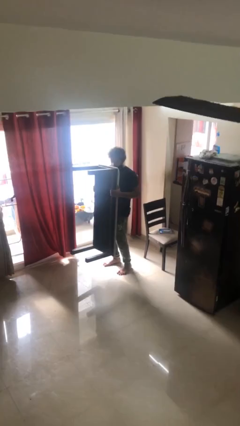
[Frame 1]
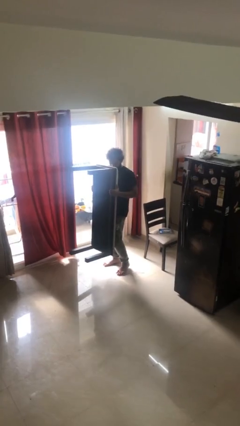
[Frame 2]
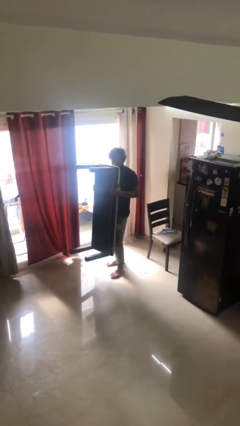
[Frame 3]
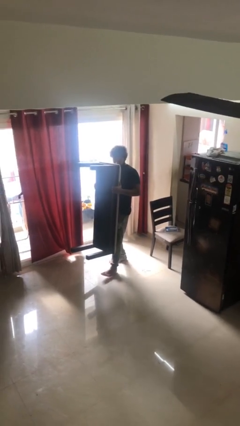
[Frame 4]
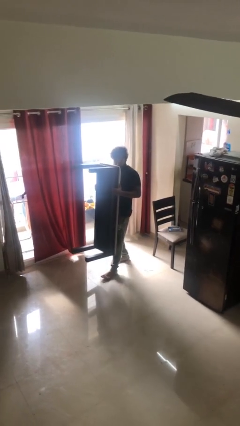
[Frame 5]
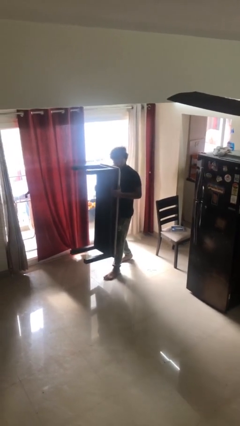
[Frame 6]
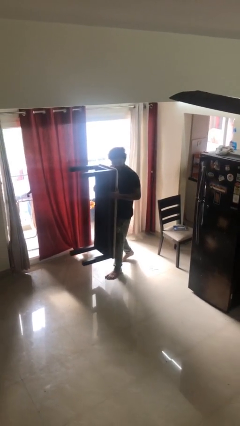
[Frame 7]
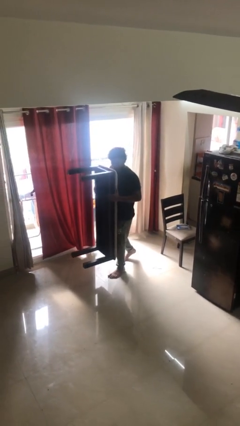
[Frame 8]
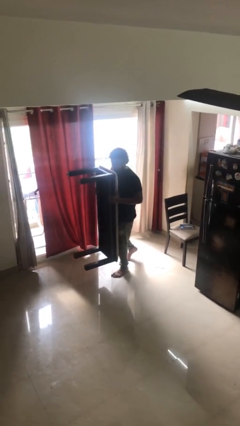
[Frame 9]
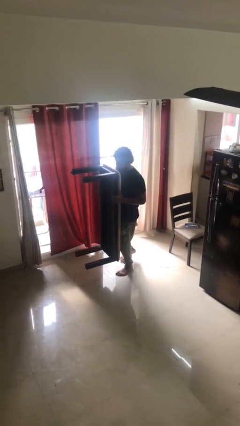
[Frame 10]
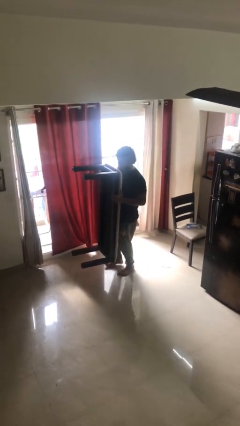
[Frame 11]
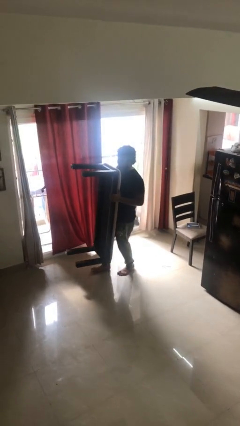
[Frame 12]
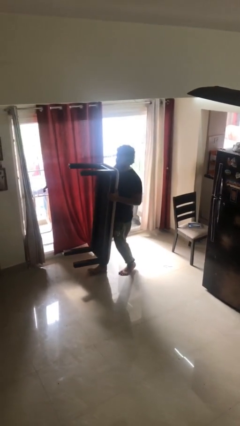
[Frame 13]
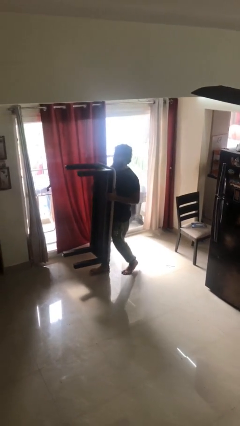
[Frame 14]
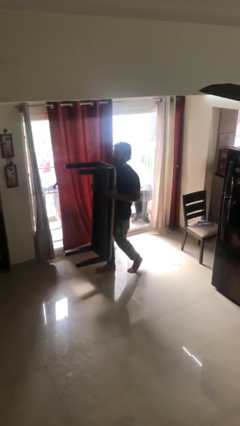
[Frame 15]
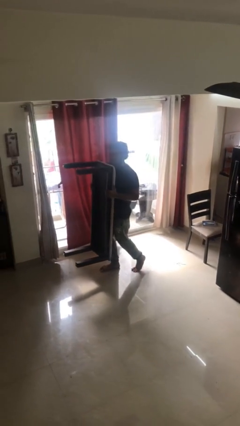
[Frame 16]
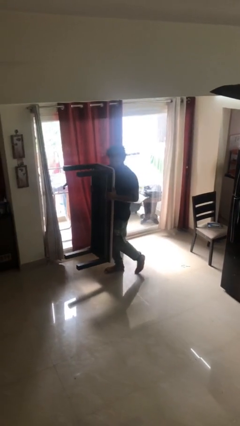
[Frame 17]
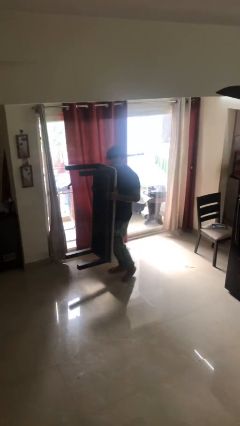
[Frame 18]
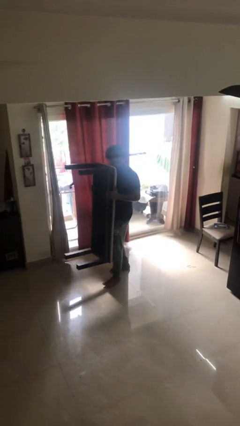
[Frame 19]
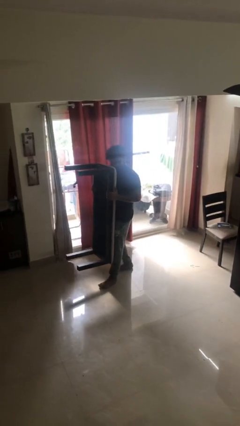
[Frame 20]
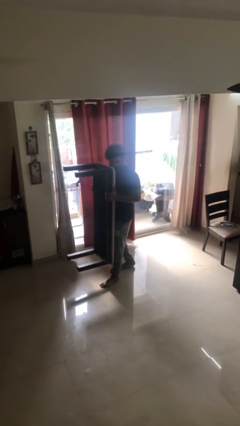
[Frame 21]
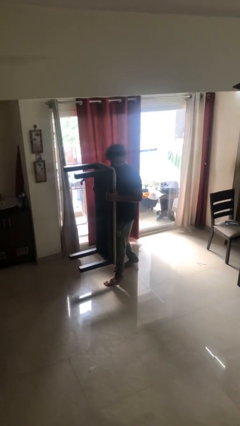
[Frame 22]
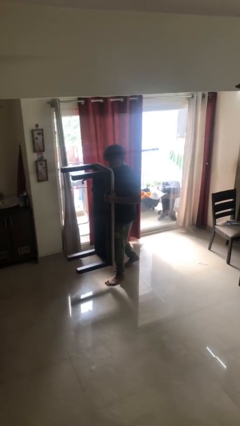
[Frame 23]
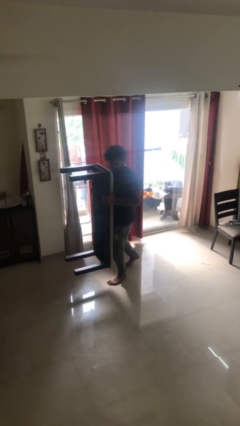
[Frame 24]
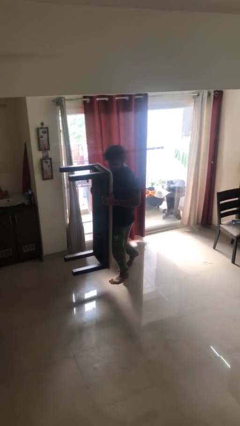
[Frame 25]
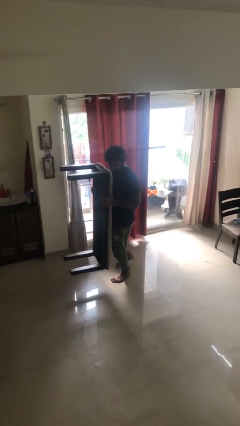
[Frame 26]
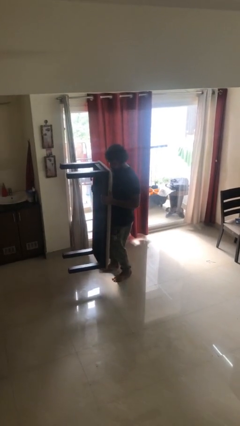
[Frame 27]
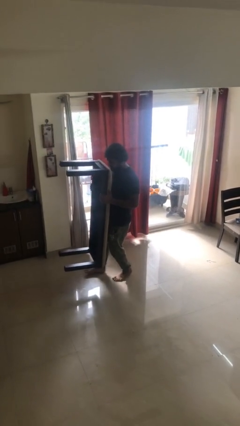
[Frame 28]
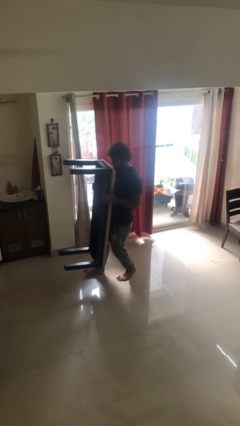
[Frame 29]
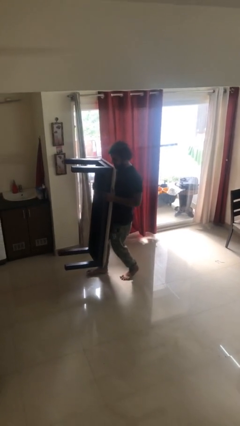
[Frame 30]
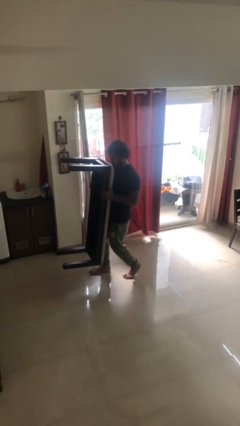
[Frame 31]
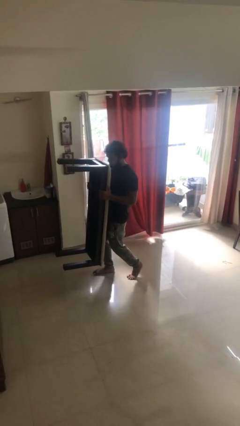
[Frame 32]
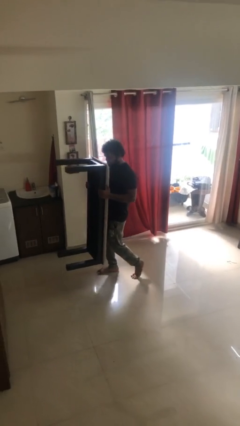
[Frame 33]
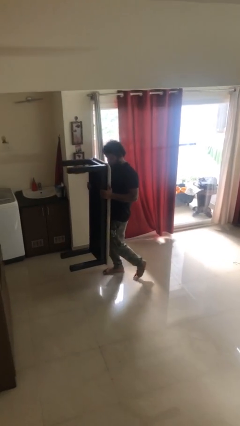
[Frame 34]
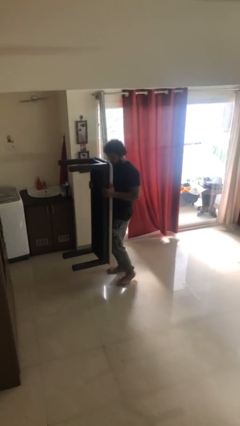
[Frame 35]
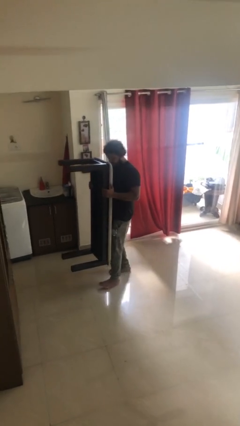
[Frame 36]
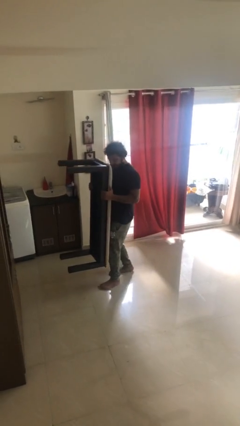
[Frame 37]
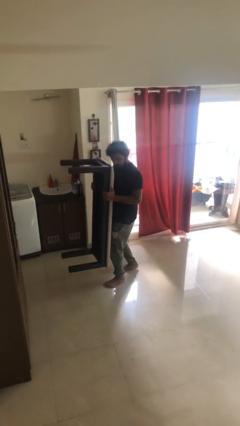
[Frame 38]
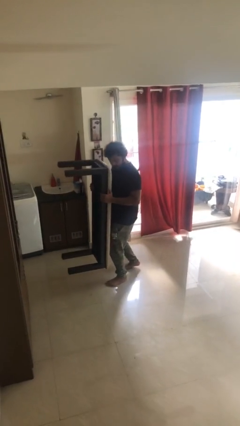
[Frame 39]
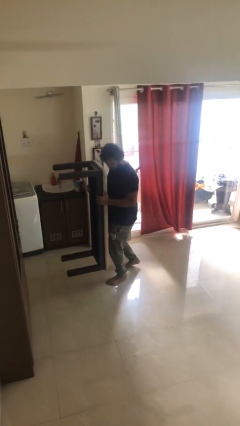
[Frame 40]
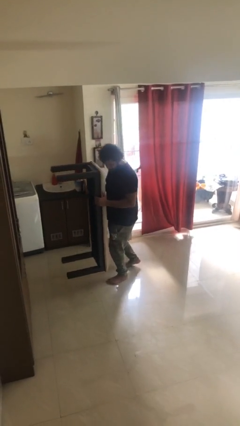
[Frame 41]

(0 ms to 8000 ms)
person carries heavy object

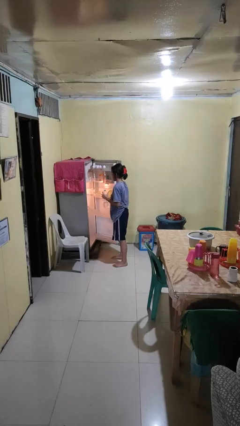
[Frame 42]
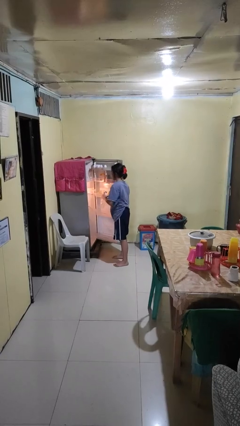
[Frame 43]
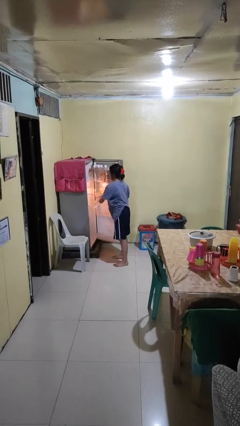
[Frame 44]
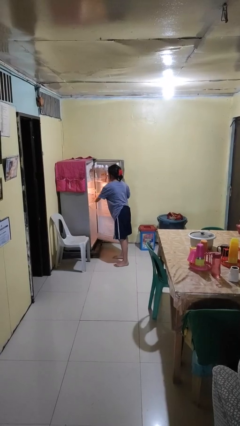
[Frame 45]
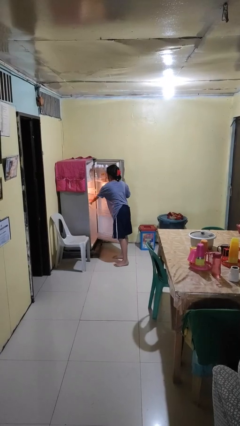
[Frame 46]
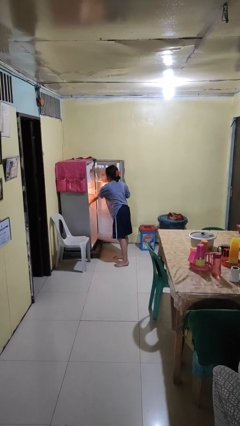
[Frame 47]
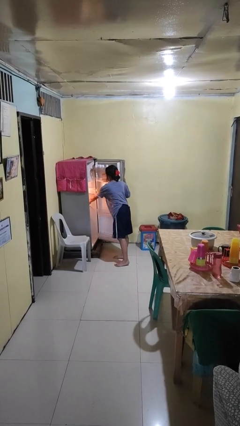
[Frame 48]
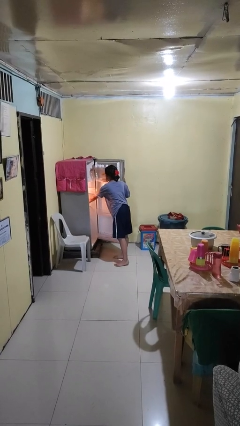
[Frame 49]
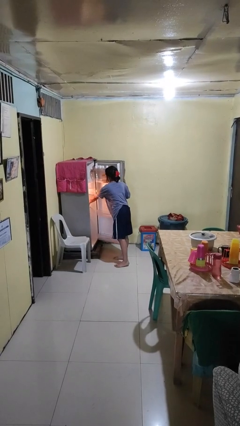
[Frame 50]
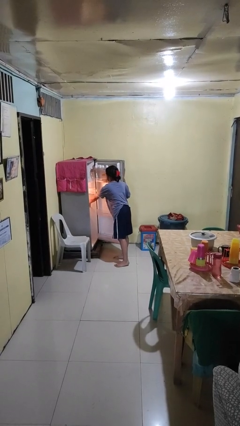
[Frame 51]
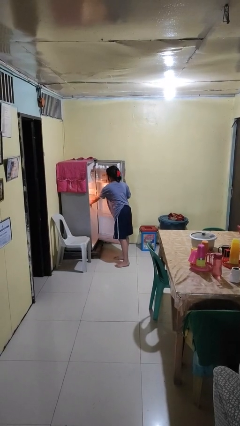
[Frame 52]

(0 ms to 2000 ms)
person puts object into refrigerator

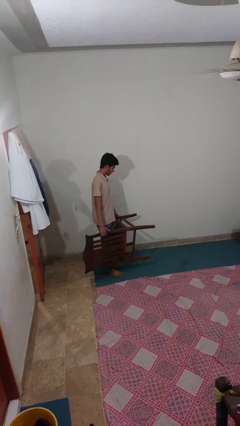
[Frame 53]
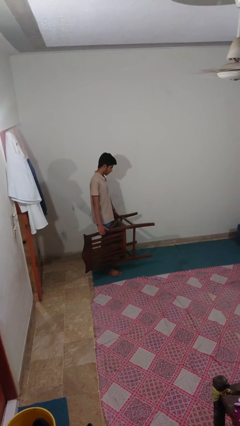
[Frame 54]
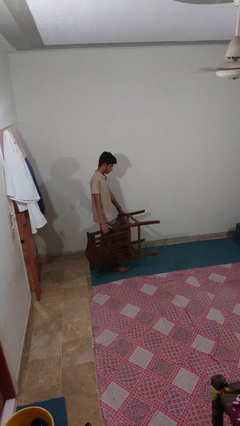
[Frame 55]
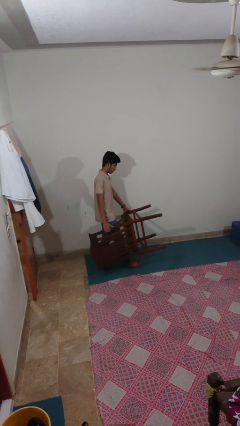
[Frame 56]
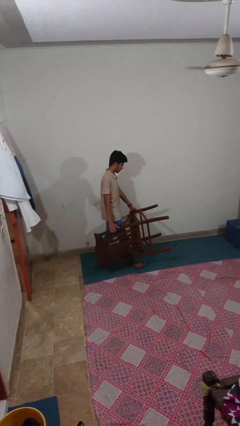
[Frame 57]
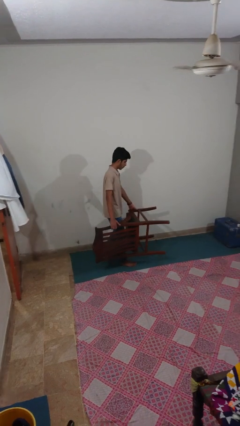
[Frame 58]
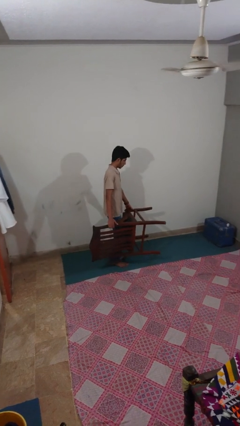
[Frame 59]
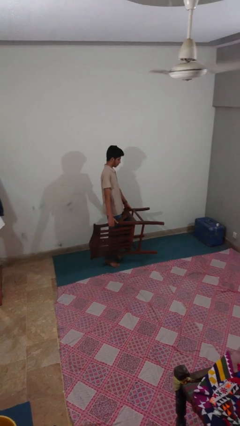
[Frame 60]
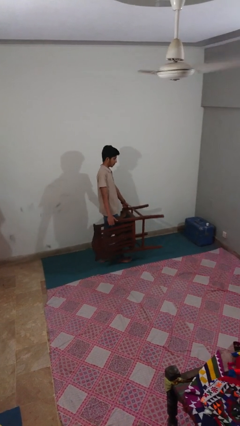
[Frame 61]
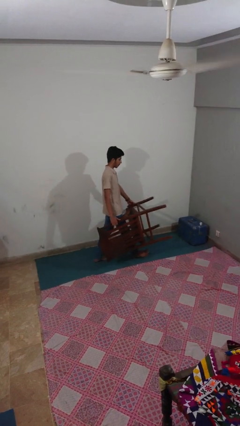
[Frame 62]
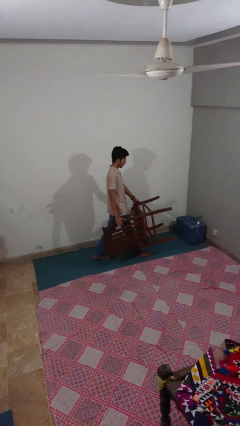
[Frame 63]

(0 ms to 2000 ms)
person carries furniture

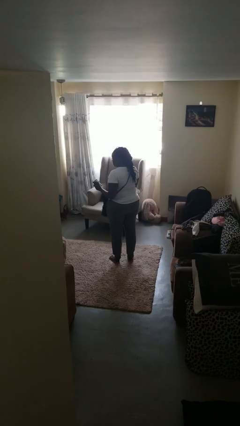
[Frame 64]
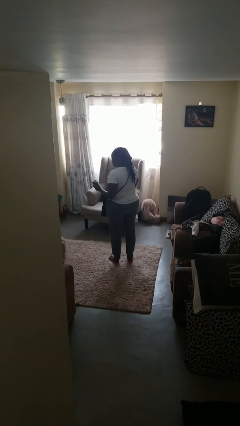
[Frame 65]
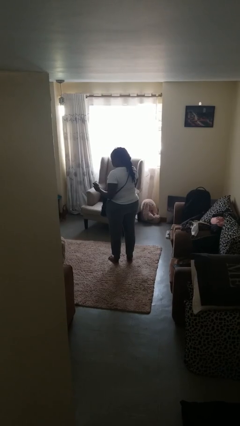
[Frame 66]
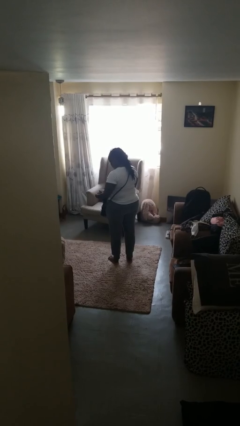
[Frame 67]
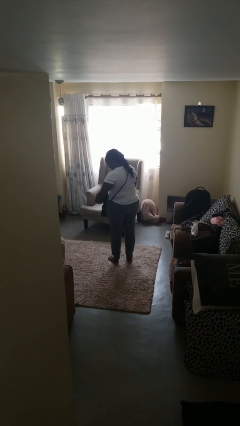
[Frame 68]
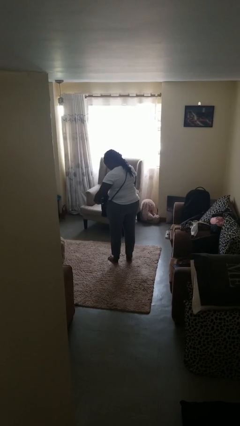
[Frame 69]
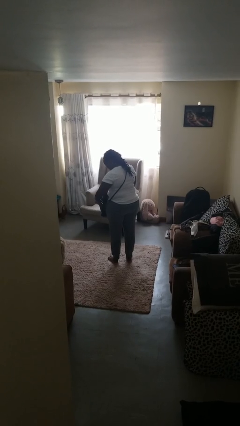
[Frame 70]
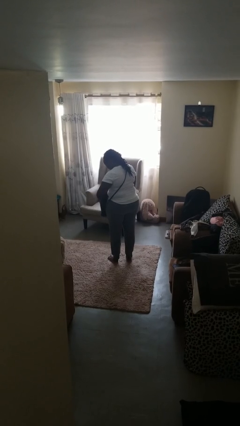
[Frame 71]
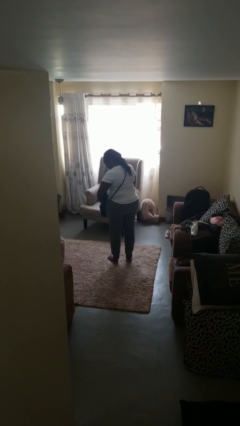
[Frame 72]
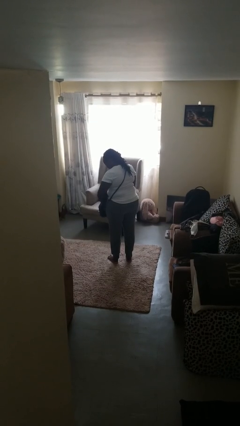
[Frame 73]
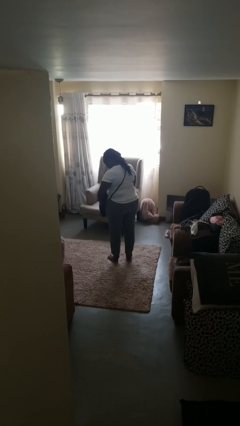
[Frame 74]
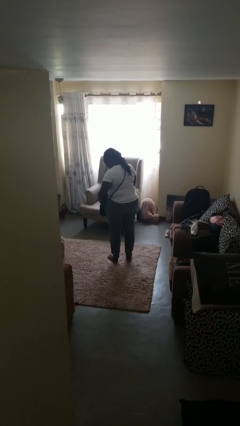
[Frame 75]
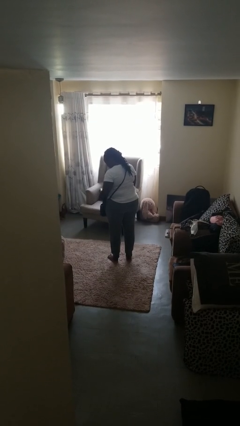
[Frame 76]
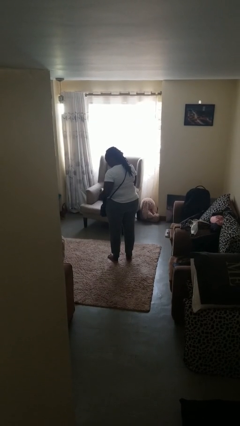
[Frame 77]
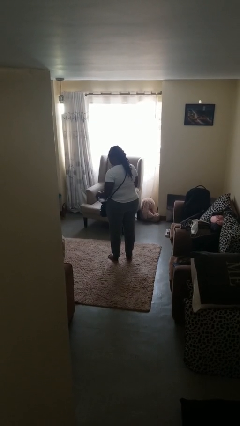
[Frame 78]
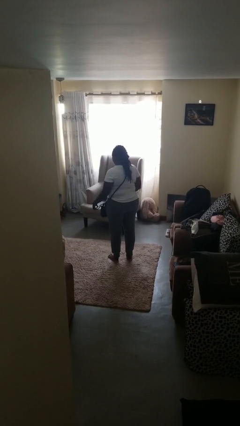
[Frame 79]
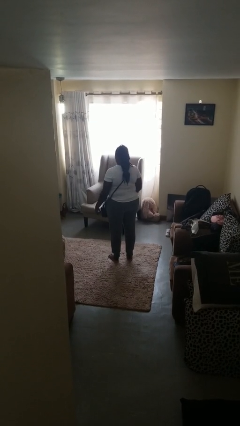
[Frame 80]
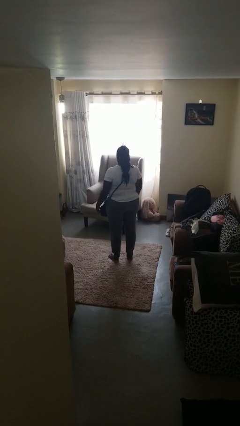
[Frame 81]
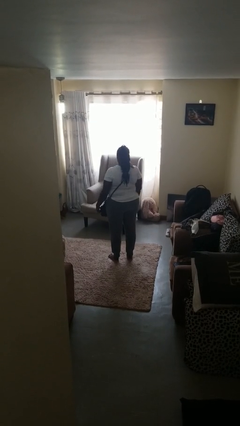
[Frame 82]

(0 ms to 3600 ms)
person puts object into purse

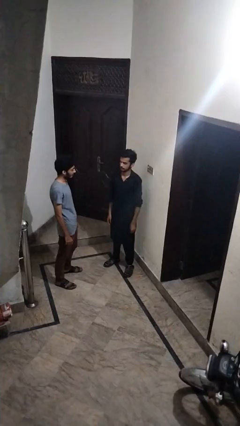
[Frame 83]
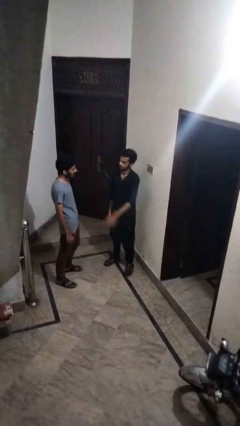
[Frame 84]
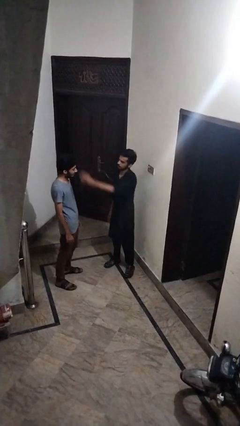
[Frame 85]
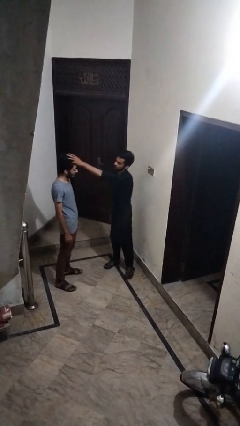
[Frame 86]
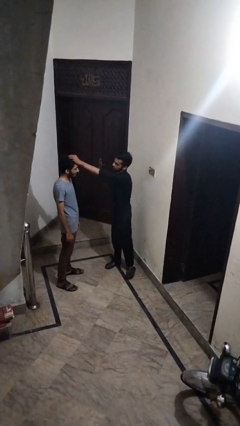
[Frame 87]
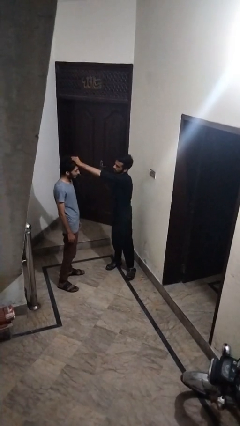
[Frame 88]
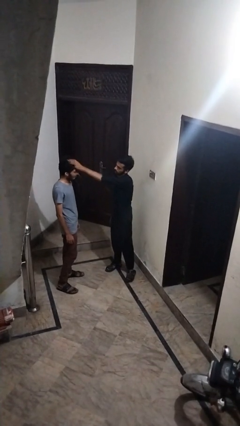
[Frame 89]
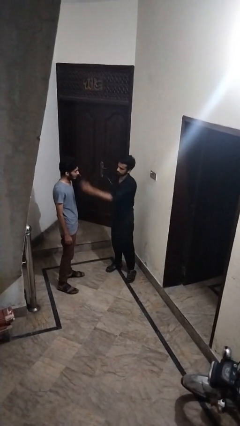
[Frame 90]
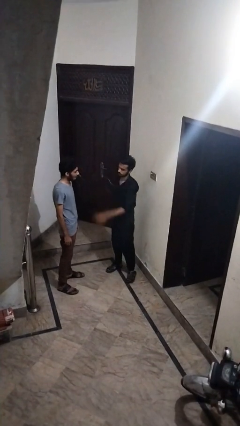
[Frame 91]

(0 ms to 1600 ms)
person grabs person by hair

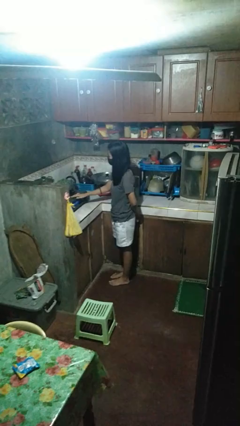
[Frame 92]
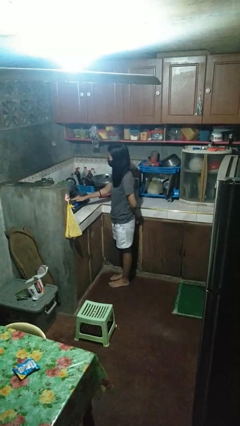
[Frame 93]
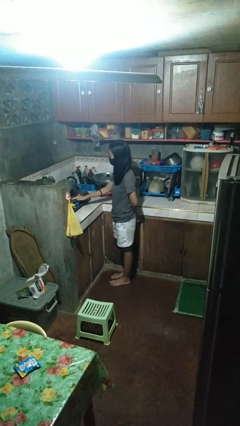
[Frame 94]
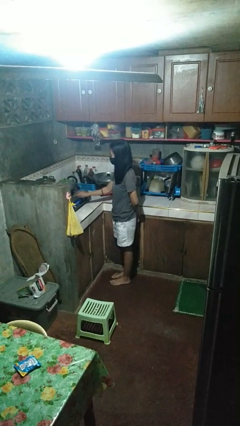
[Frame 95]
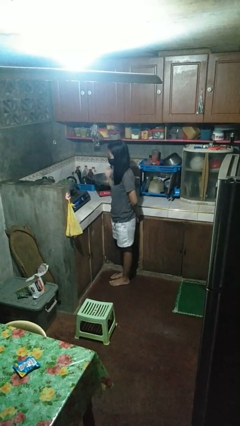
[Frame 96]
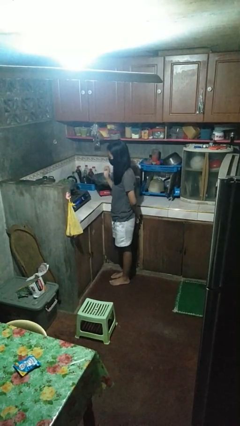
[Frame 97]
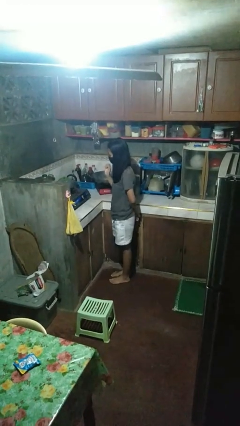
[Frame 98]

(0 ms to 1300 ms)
person burns hand
